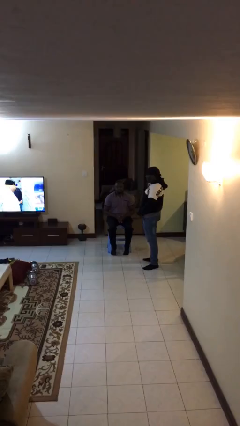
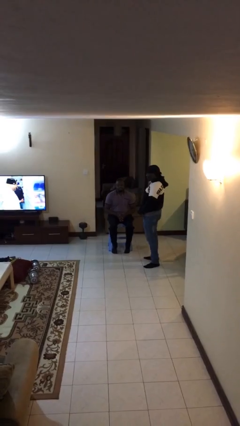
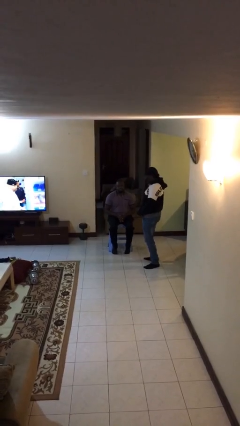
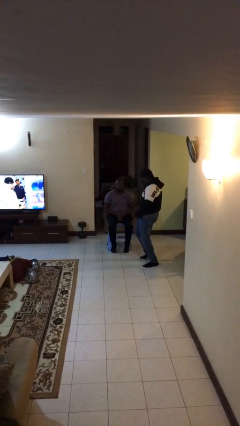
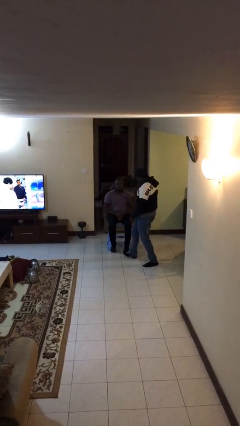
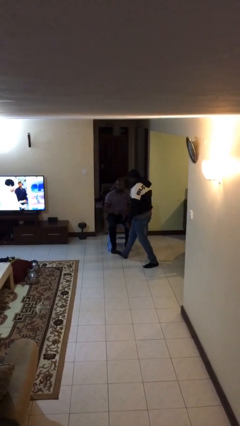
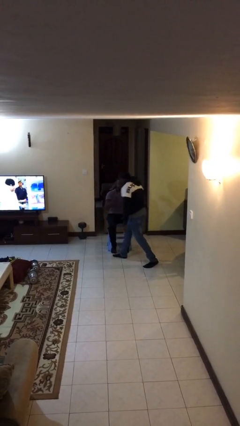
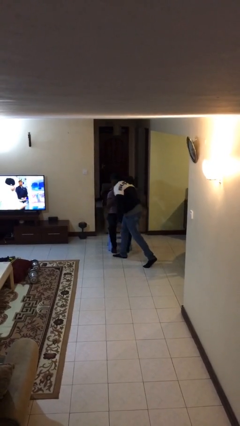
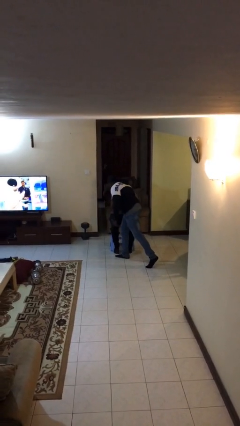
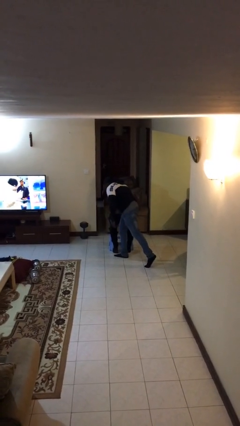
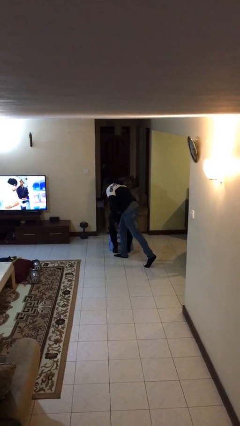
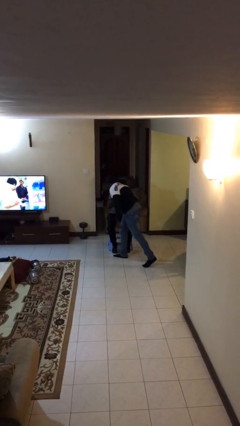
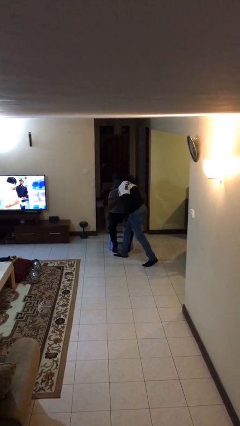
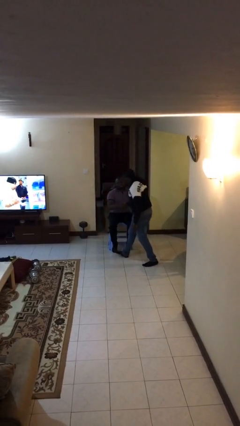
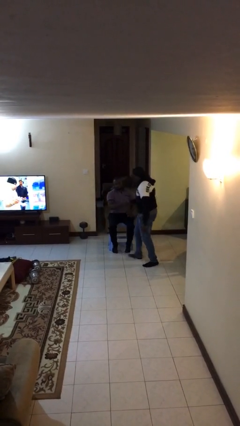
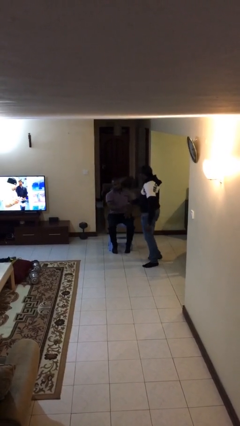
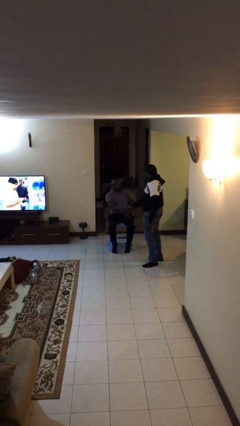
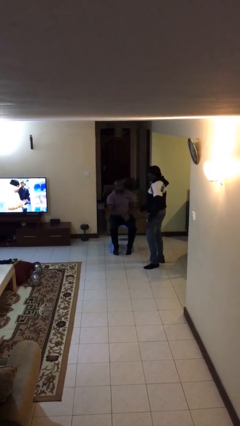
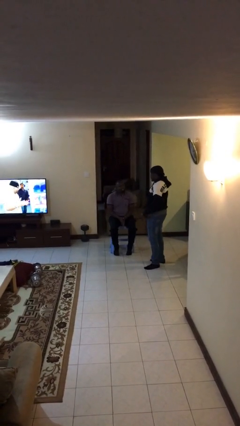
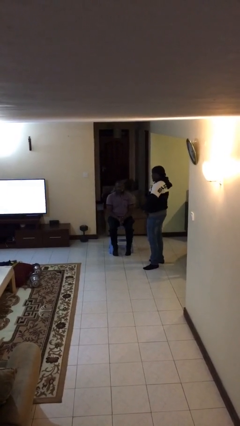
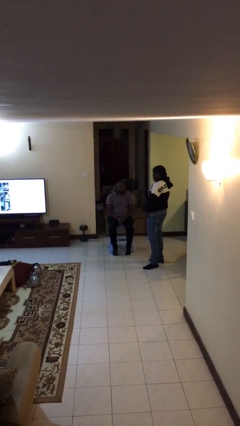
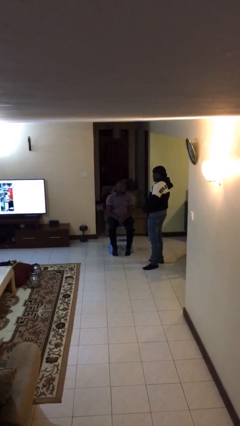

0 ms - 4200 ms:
person embraces person

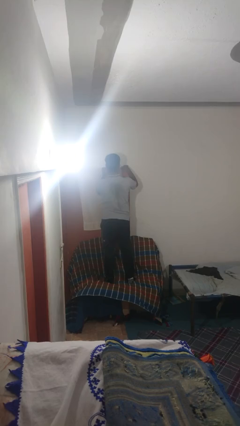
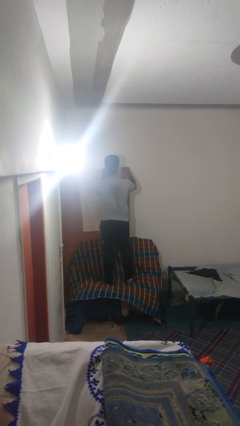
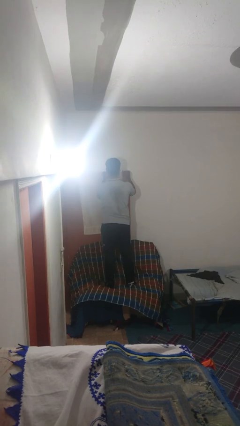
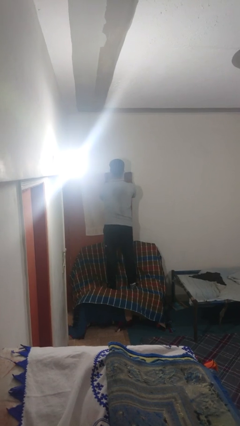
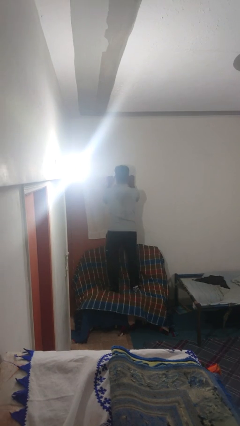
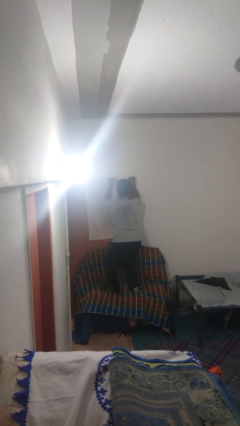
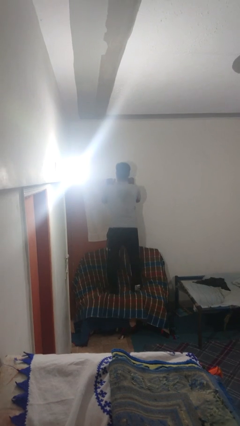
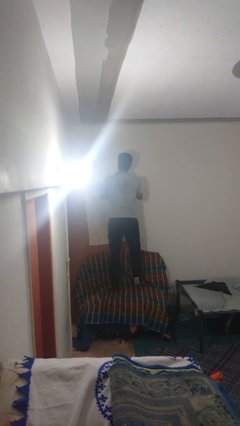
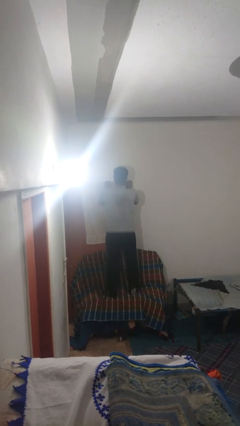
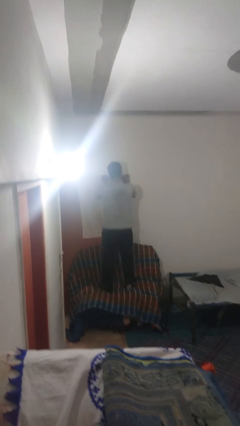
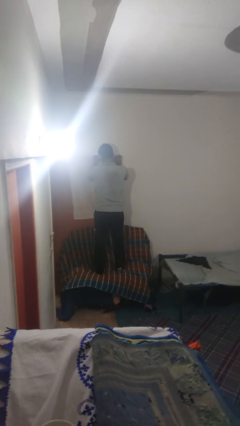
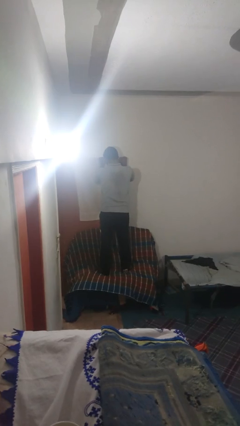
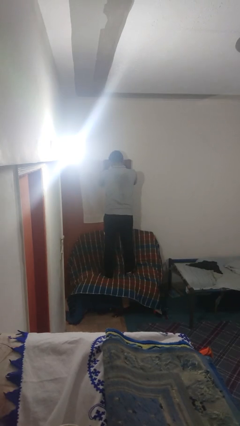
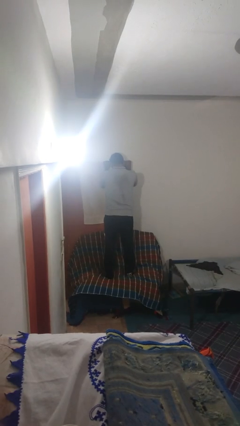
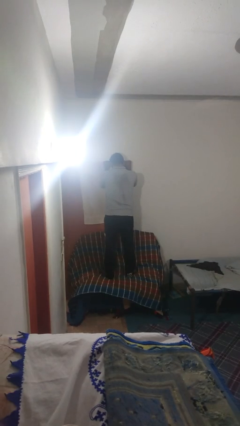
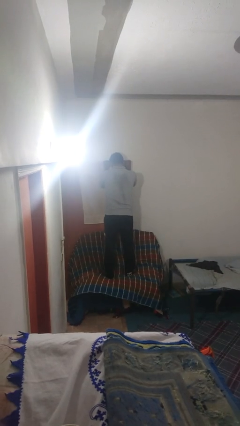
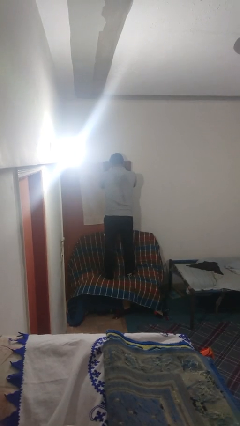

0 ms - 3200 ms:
person jumps on couch

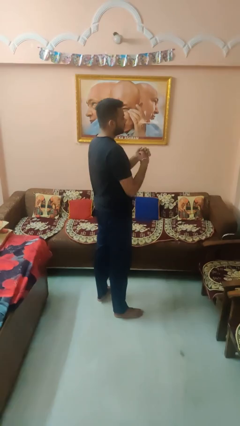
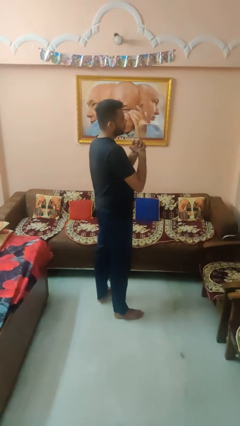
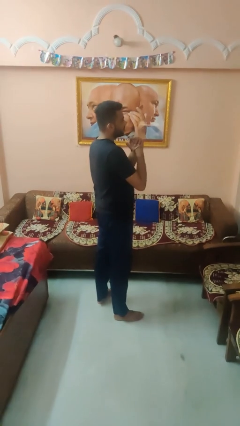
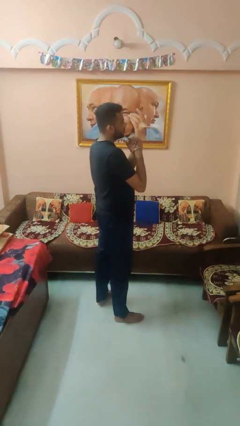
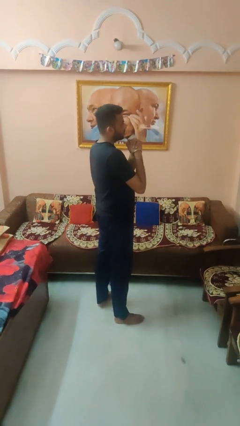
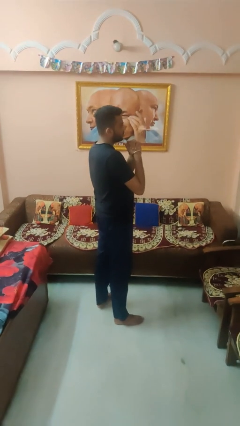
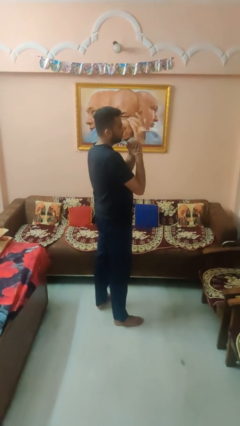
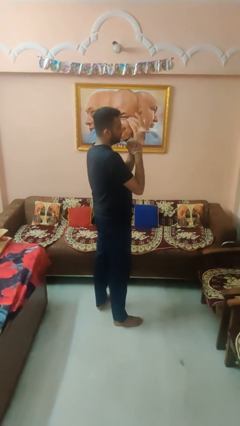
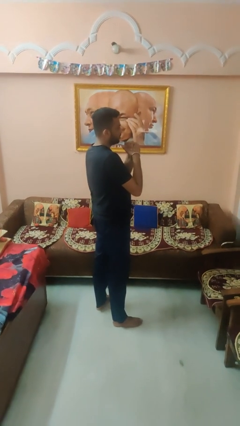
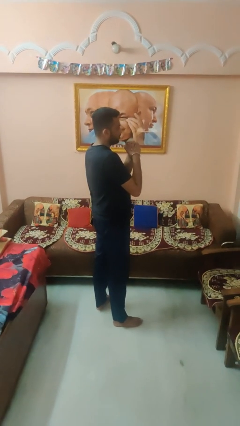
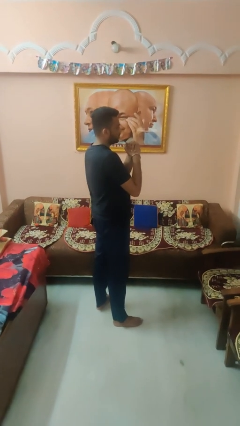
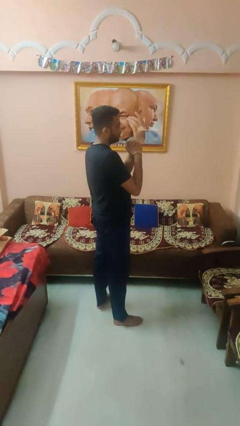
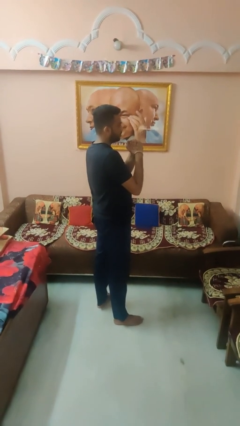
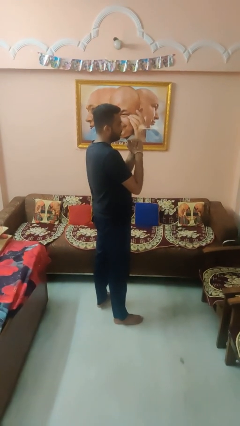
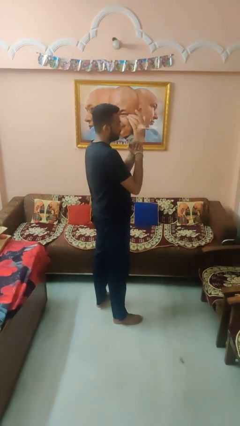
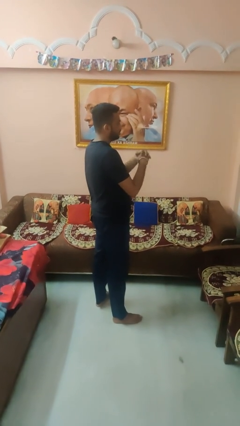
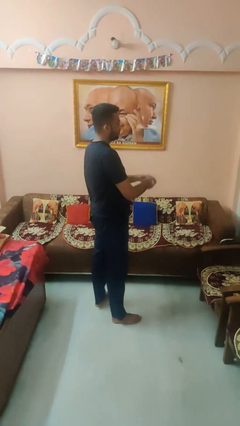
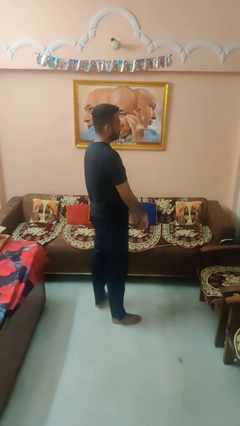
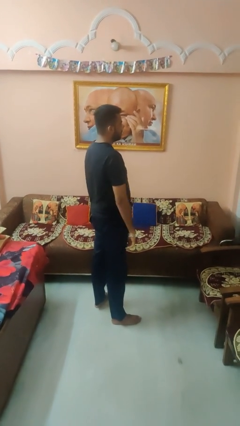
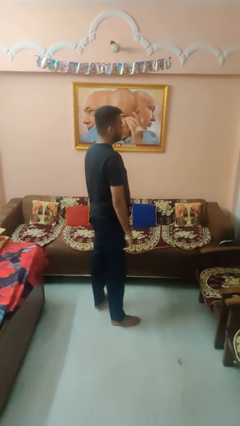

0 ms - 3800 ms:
person cracks knuckles

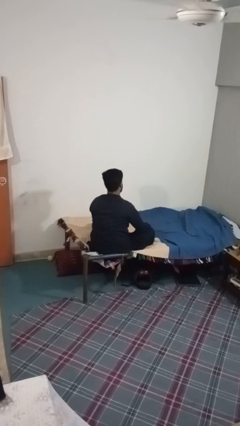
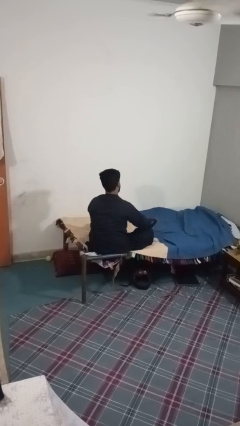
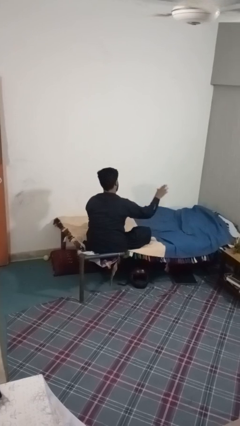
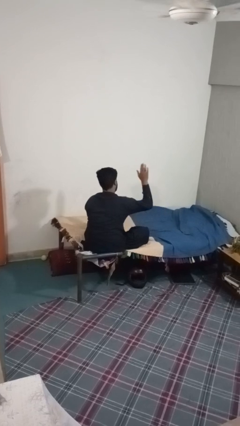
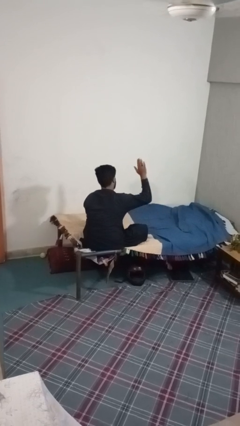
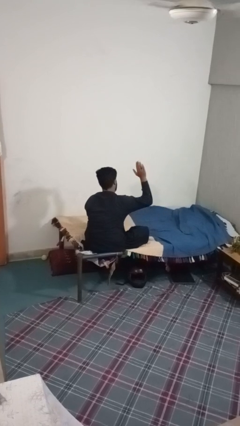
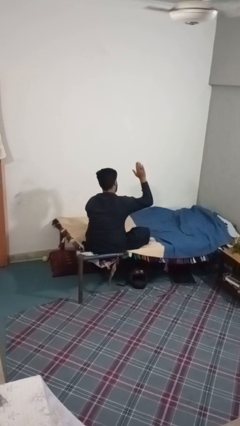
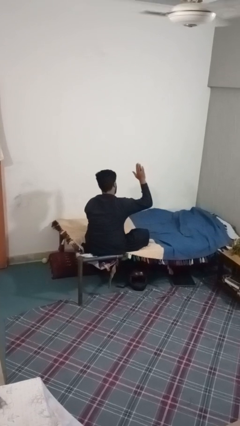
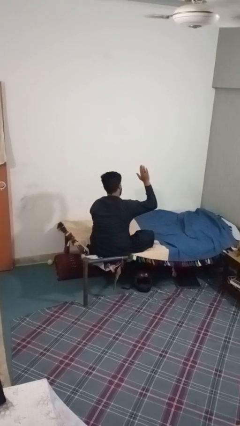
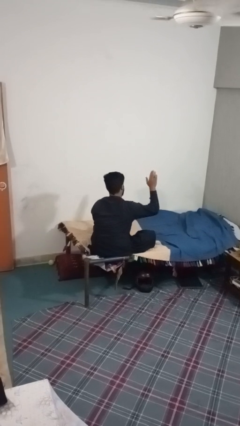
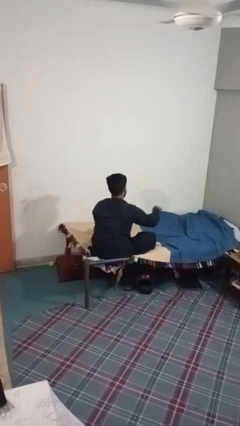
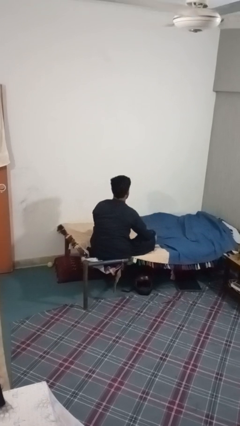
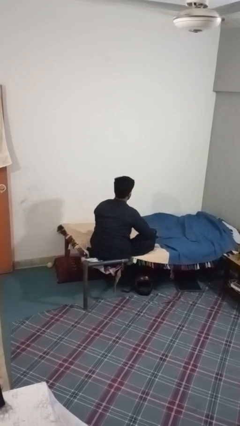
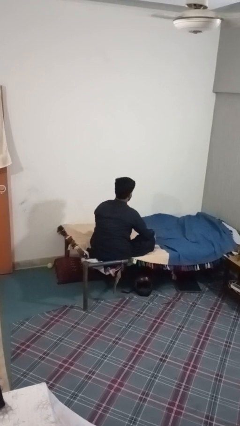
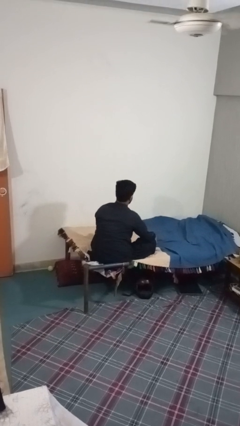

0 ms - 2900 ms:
person gestures stop

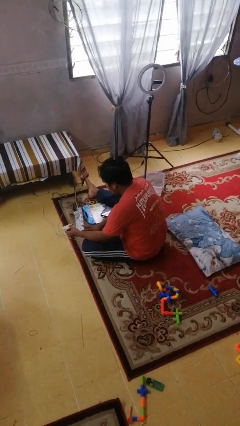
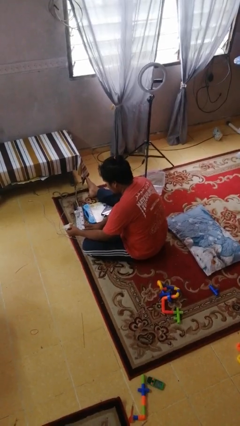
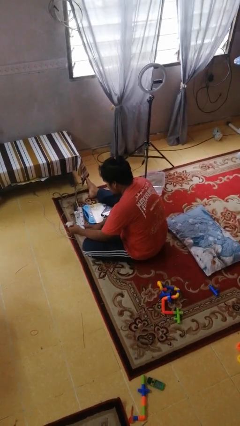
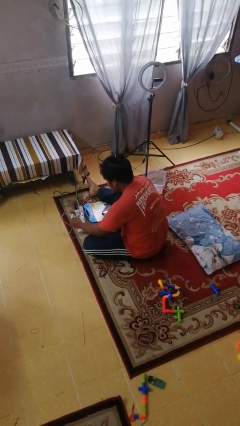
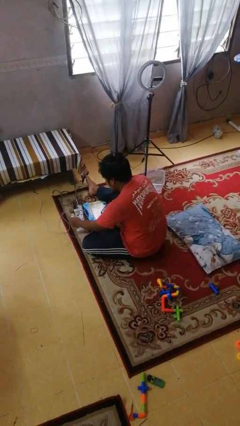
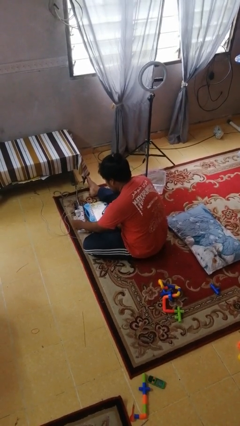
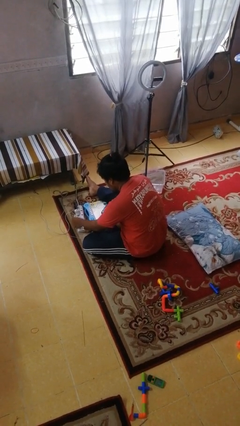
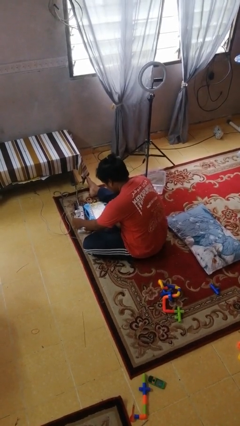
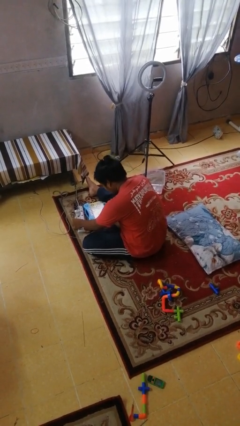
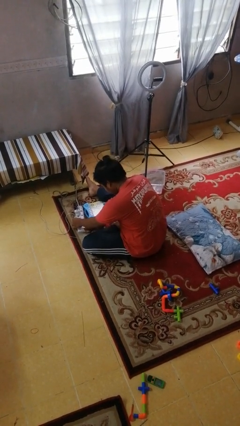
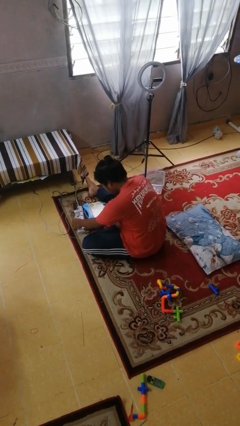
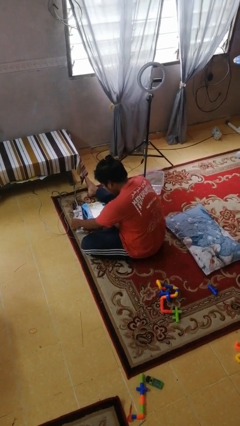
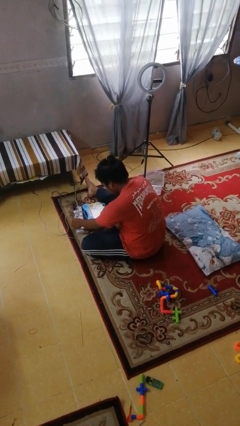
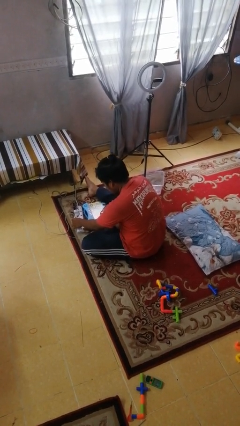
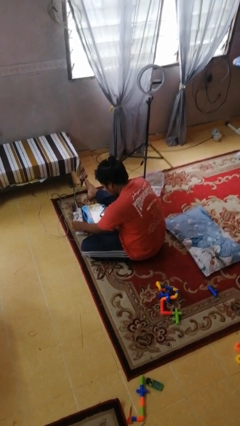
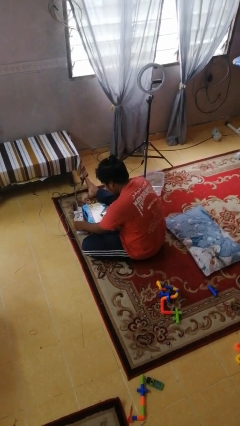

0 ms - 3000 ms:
person plugs into electrical socket
